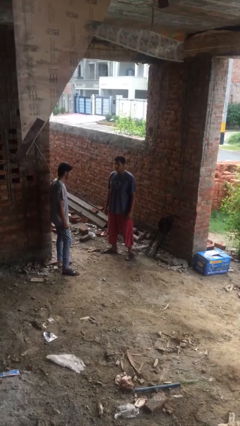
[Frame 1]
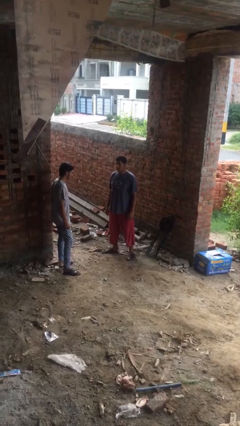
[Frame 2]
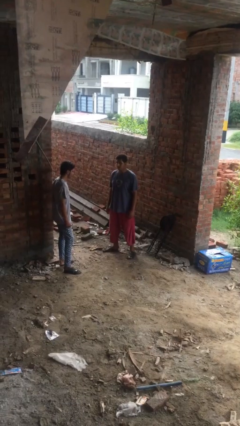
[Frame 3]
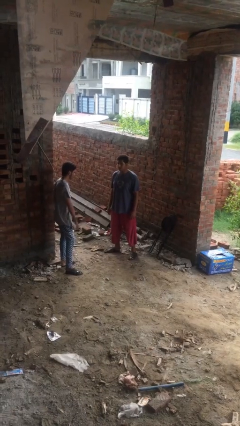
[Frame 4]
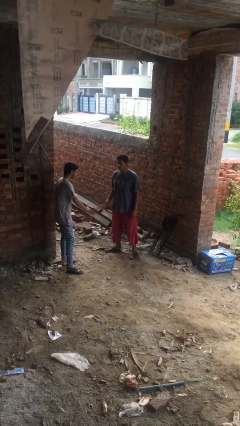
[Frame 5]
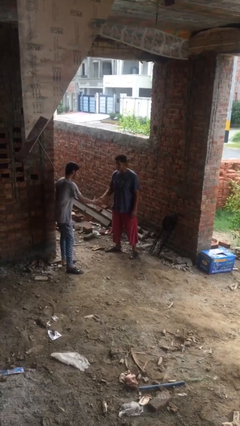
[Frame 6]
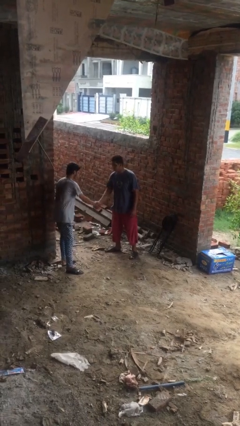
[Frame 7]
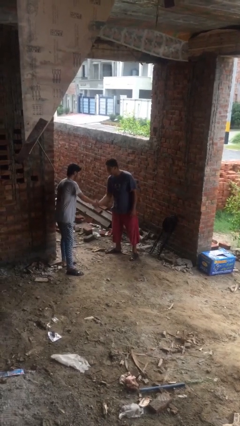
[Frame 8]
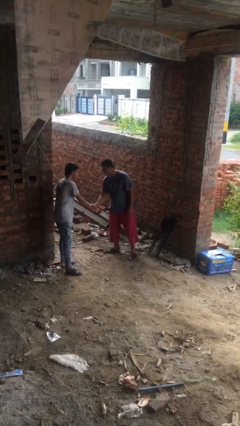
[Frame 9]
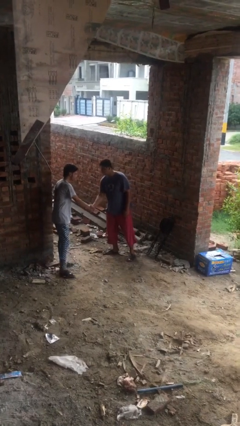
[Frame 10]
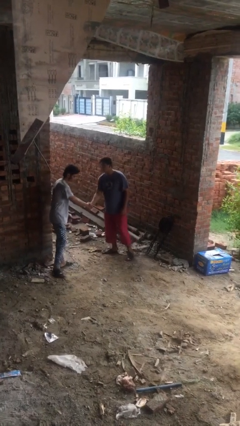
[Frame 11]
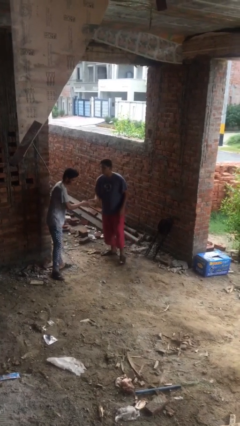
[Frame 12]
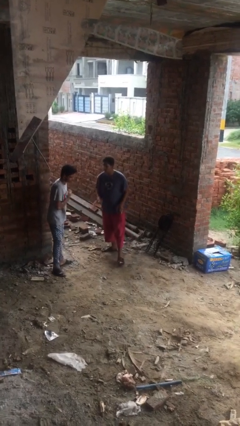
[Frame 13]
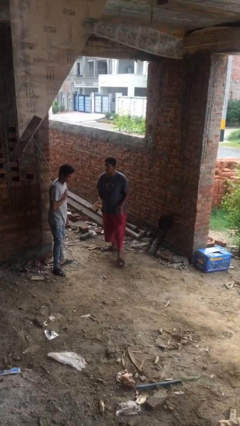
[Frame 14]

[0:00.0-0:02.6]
person shakes hand

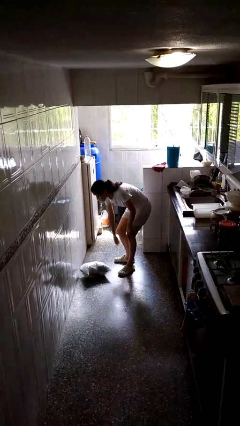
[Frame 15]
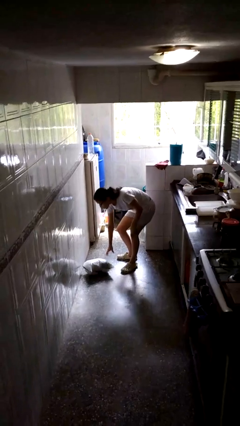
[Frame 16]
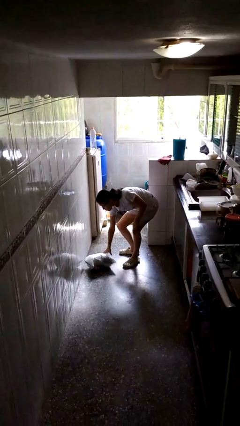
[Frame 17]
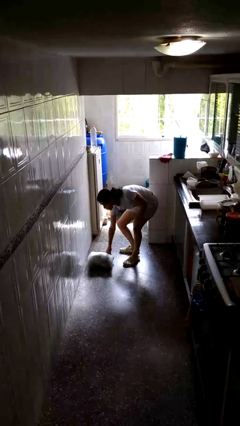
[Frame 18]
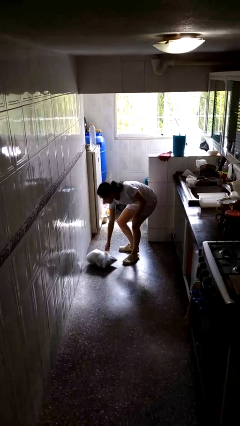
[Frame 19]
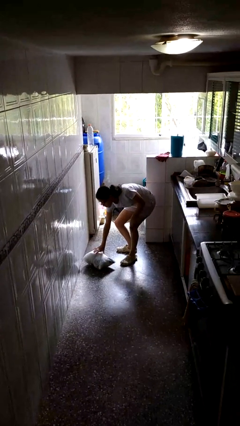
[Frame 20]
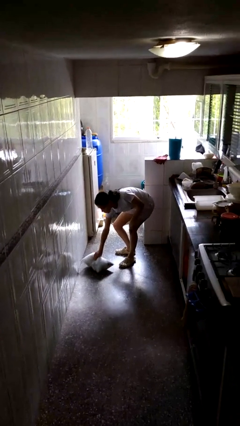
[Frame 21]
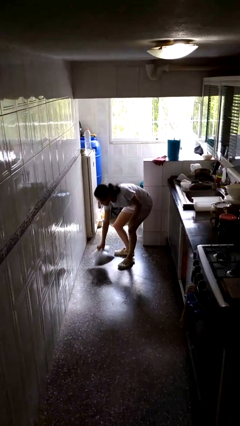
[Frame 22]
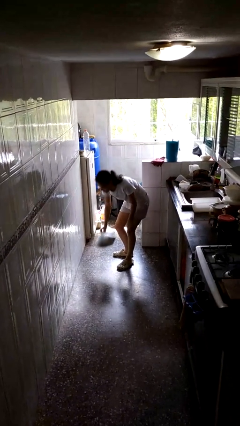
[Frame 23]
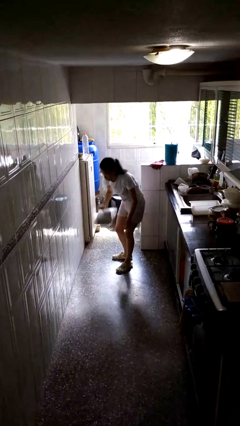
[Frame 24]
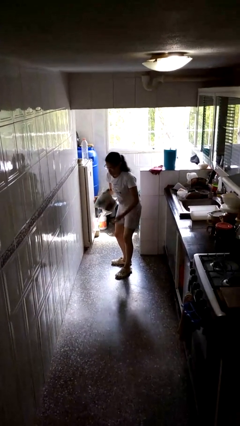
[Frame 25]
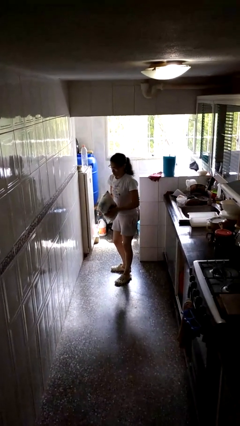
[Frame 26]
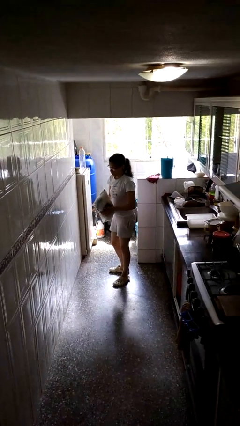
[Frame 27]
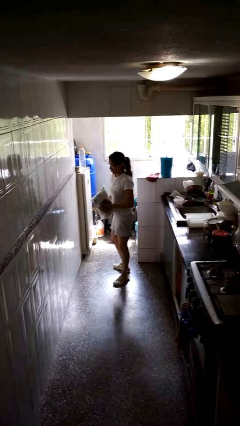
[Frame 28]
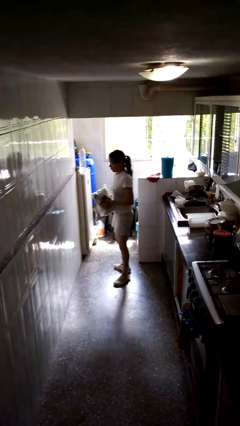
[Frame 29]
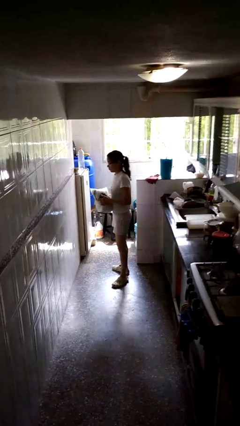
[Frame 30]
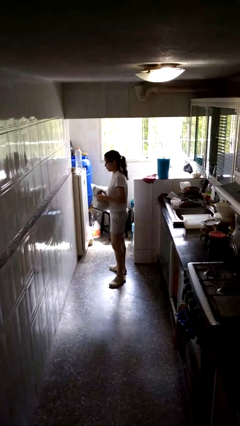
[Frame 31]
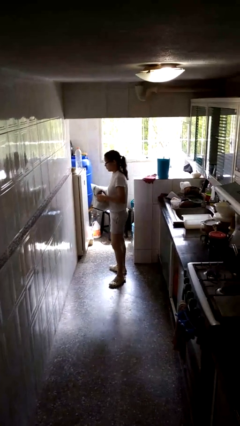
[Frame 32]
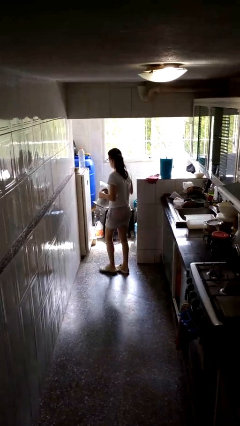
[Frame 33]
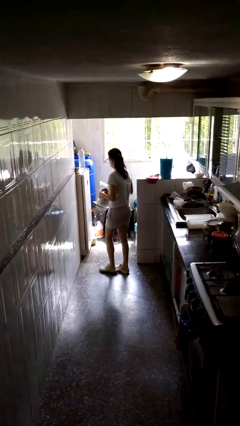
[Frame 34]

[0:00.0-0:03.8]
person picks up object from floor

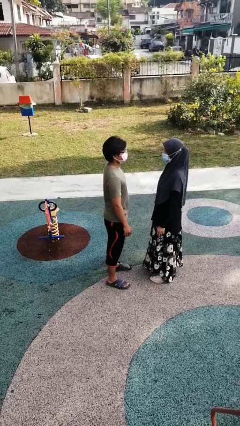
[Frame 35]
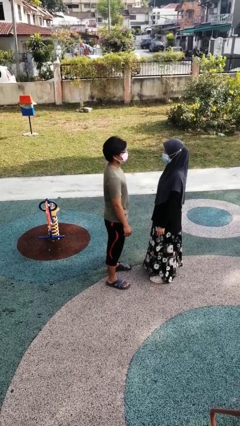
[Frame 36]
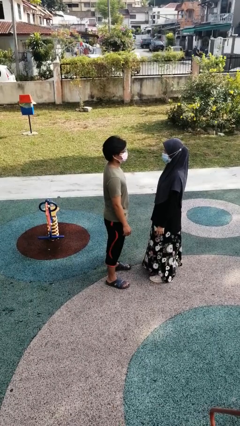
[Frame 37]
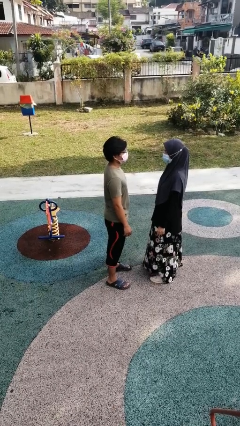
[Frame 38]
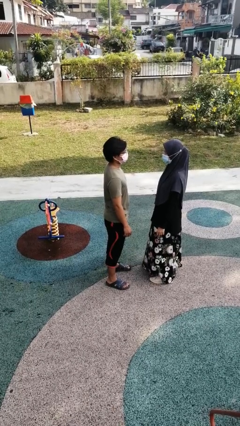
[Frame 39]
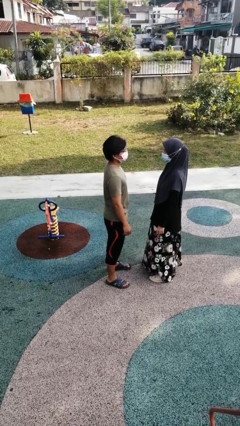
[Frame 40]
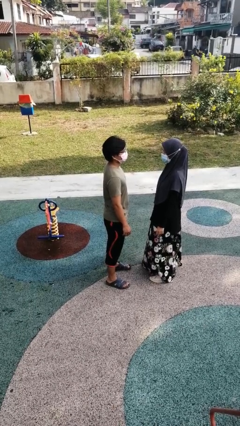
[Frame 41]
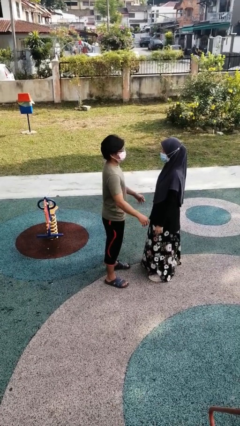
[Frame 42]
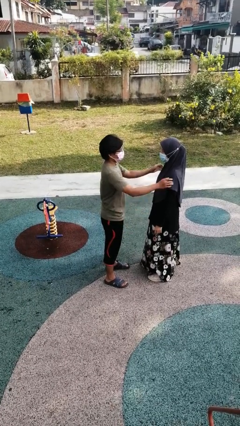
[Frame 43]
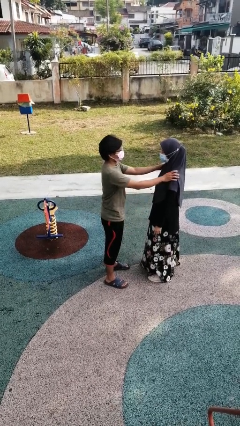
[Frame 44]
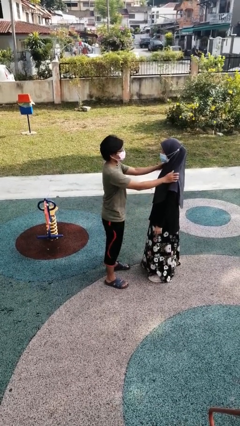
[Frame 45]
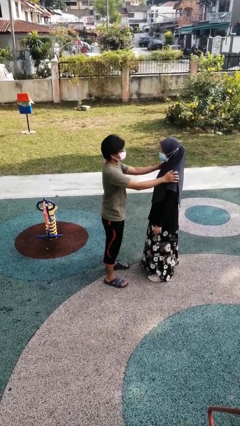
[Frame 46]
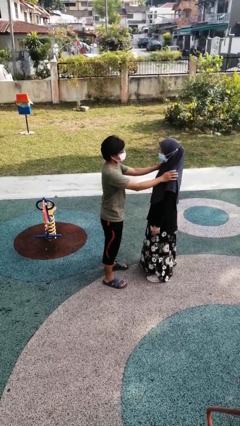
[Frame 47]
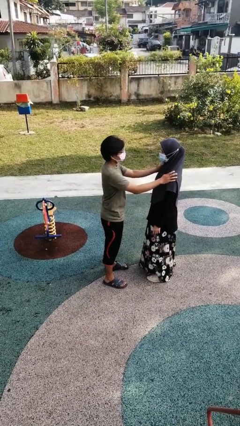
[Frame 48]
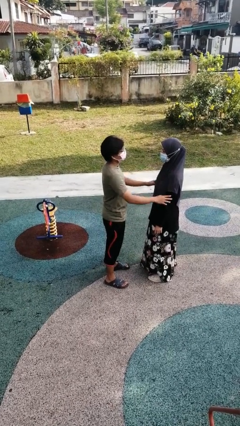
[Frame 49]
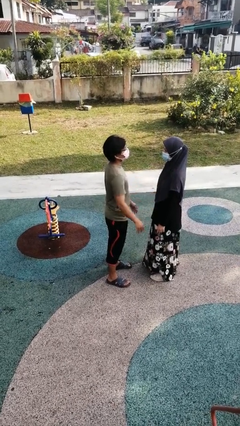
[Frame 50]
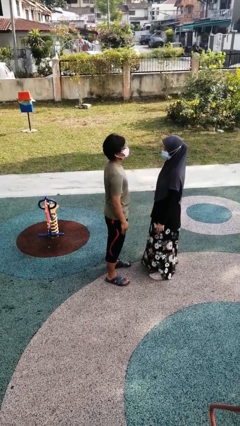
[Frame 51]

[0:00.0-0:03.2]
person pounds shoulders of person

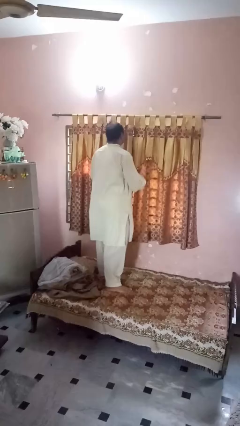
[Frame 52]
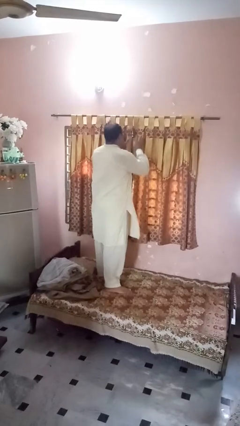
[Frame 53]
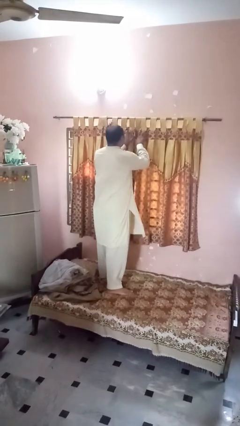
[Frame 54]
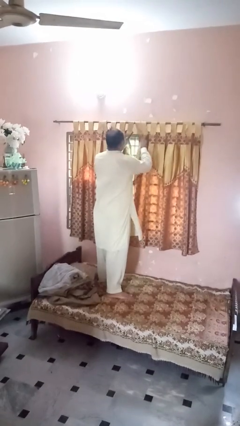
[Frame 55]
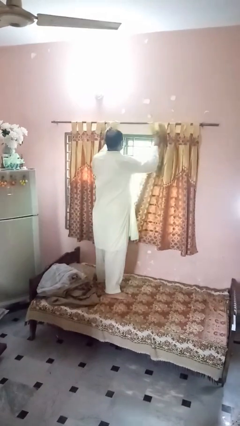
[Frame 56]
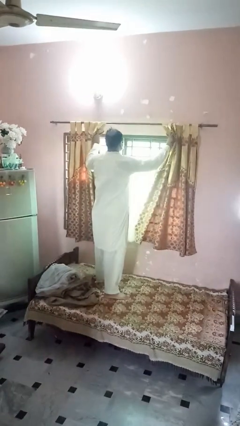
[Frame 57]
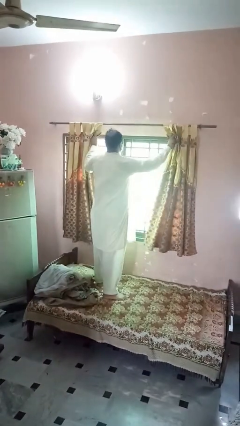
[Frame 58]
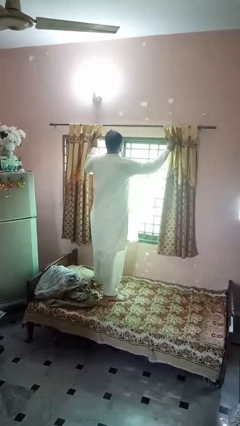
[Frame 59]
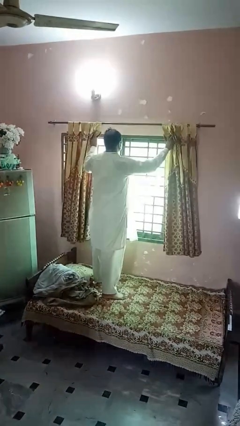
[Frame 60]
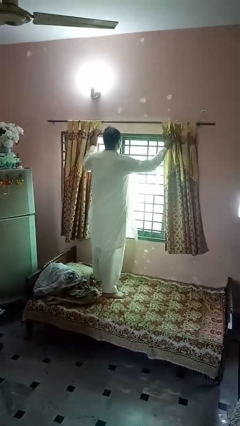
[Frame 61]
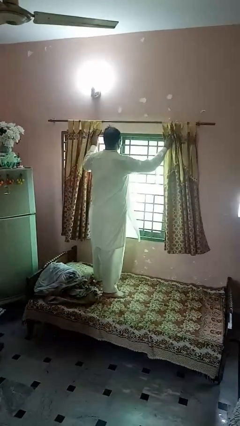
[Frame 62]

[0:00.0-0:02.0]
person opens curtains

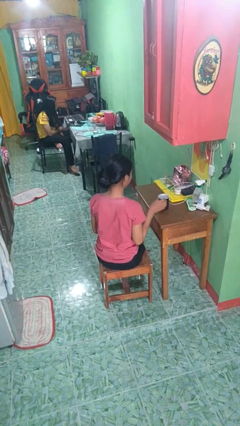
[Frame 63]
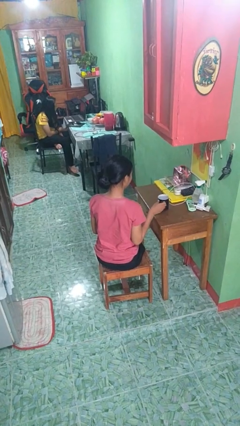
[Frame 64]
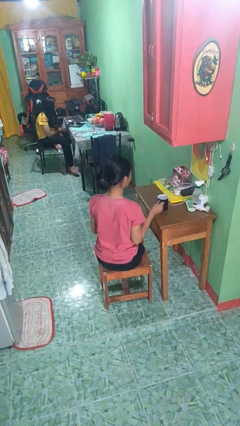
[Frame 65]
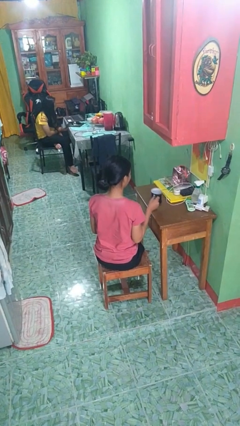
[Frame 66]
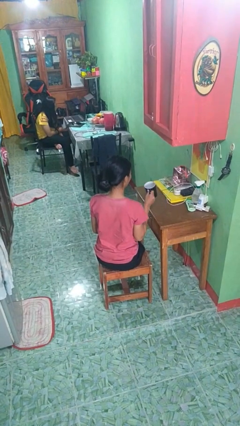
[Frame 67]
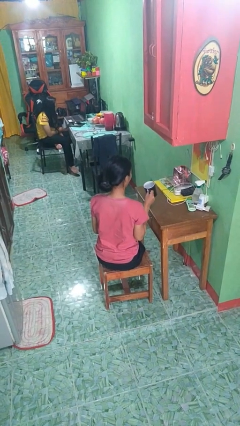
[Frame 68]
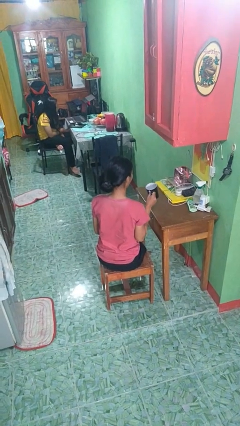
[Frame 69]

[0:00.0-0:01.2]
person picks up object from table

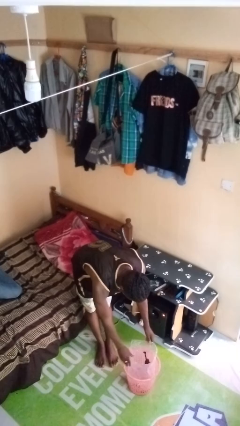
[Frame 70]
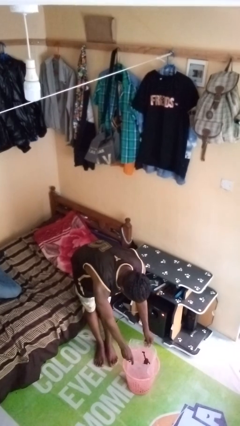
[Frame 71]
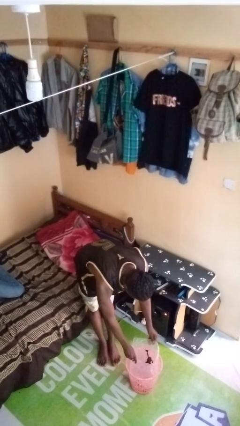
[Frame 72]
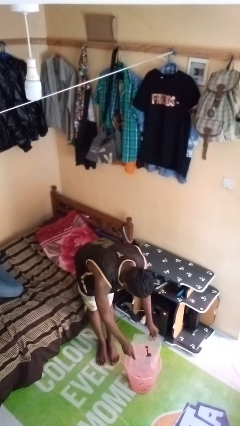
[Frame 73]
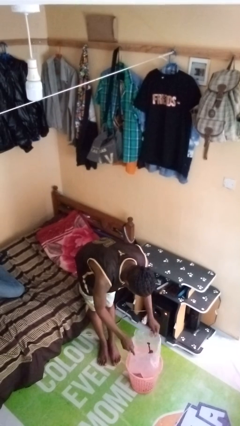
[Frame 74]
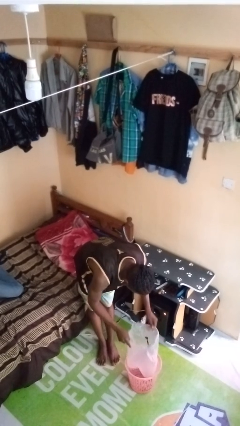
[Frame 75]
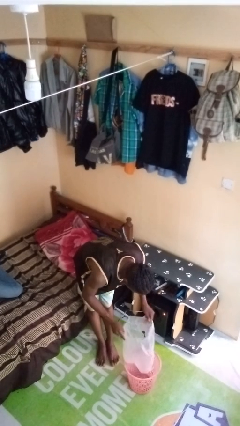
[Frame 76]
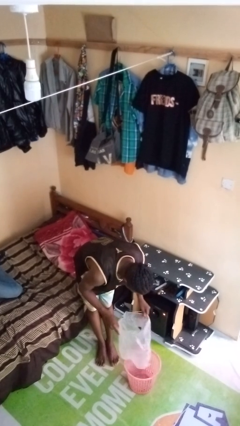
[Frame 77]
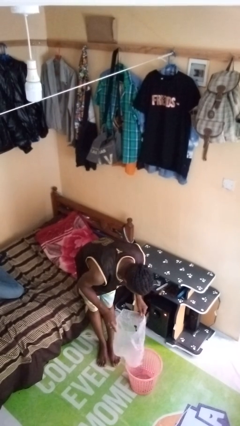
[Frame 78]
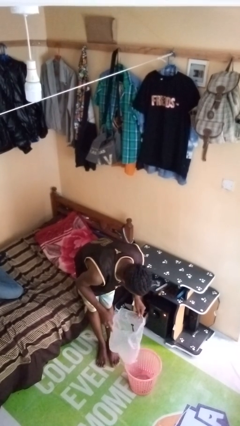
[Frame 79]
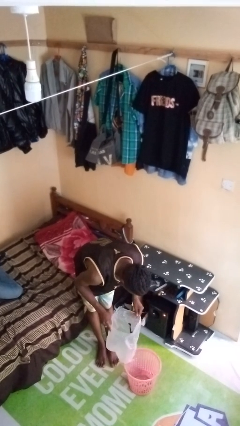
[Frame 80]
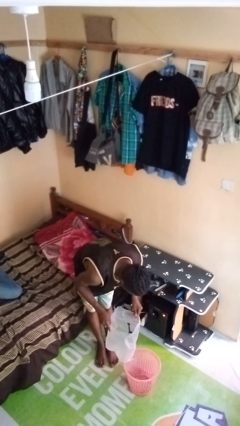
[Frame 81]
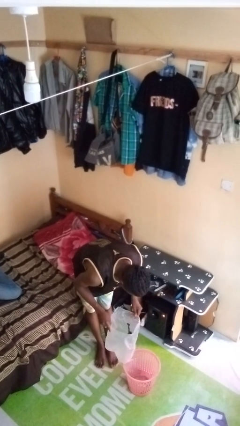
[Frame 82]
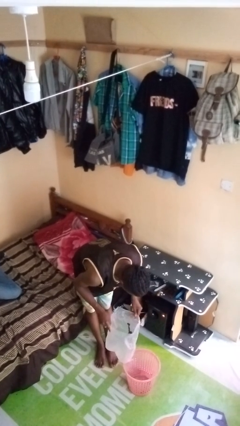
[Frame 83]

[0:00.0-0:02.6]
person removes trashbag from trashcan

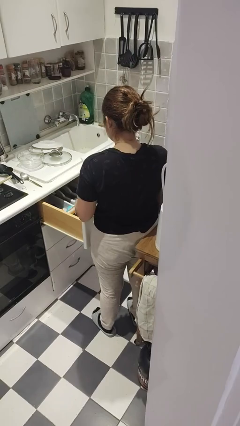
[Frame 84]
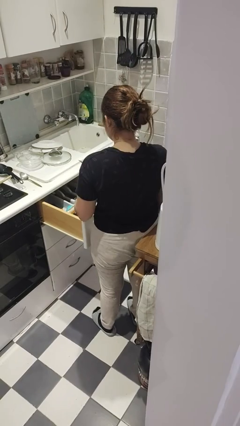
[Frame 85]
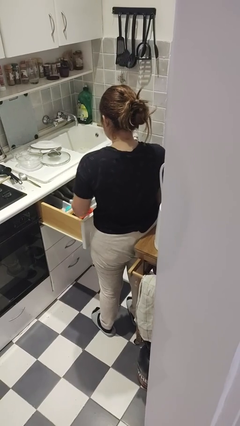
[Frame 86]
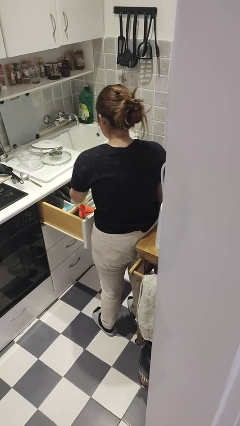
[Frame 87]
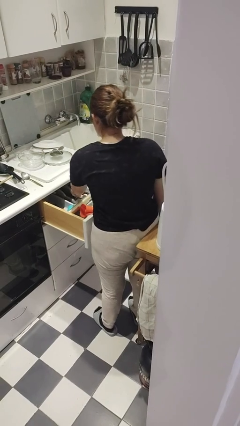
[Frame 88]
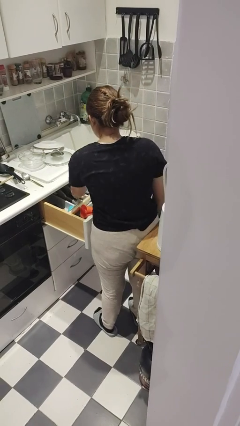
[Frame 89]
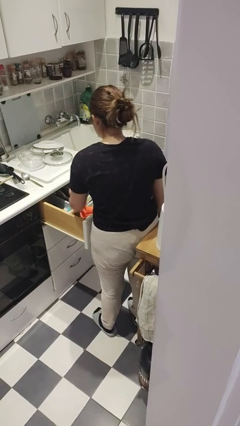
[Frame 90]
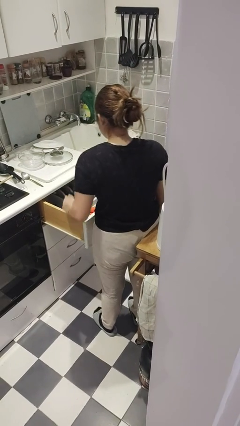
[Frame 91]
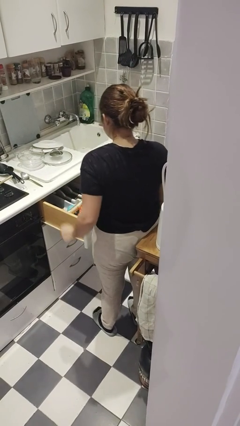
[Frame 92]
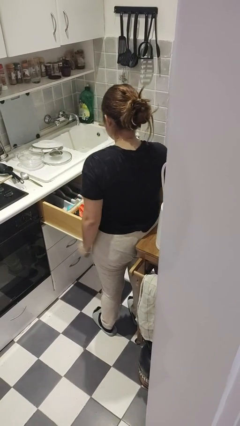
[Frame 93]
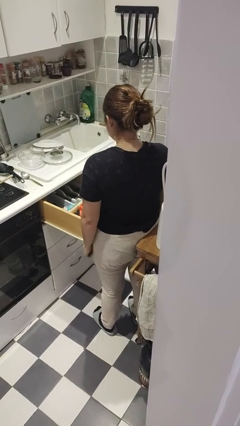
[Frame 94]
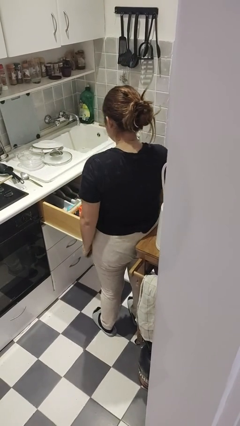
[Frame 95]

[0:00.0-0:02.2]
person puts object into kitchen drawer
